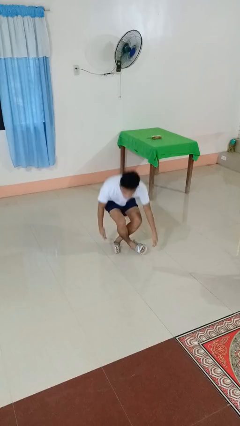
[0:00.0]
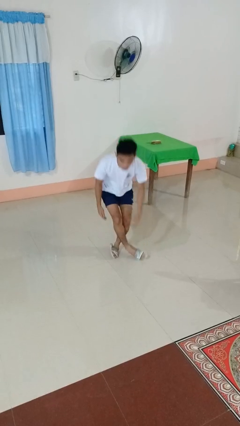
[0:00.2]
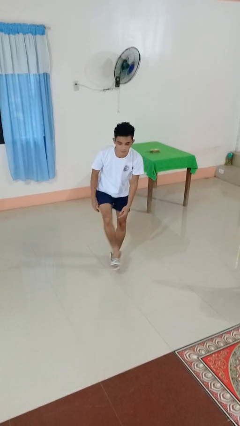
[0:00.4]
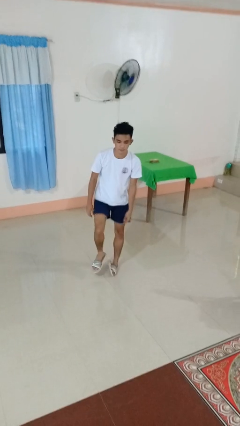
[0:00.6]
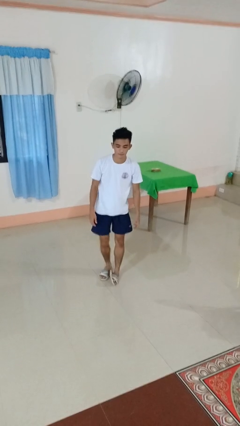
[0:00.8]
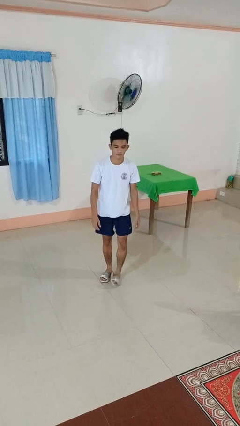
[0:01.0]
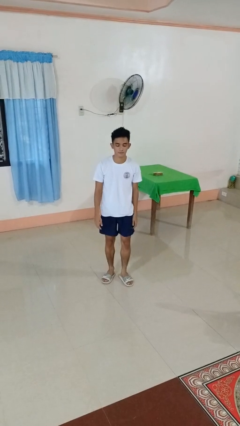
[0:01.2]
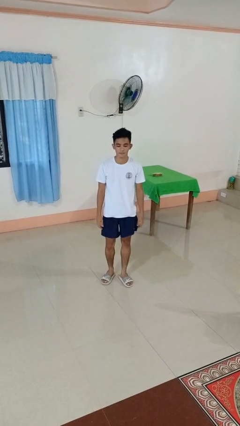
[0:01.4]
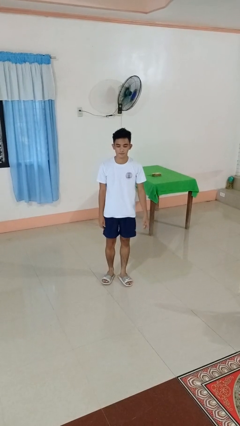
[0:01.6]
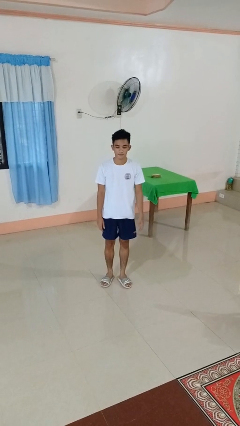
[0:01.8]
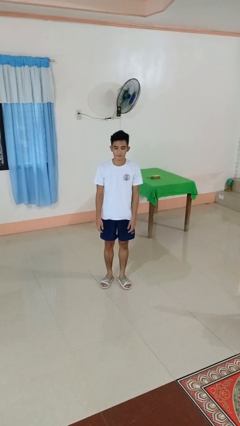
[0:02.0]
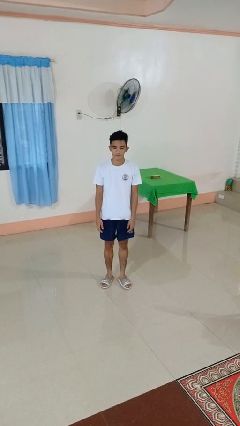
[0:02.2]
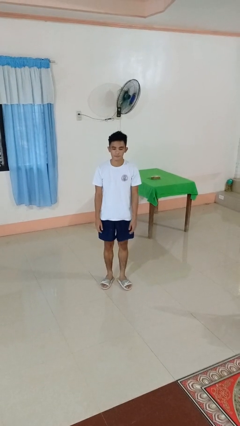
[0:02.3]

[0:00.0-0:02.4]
person stands up from floor

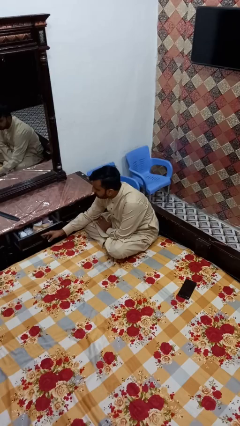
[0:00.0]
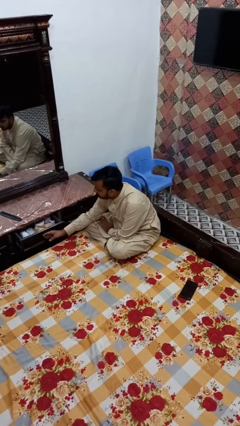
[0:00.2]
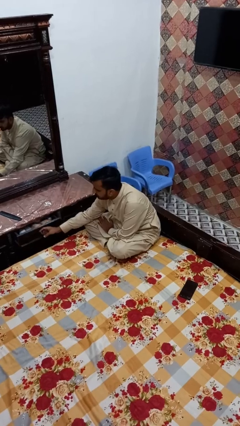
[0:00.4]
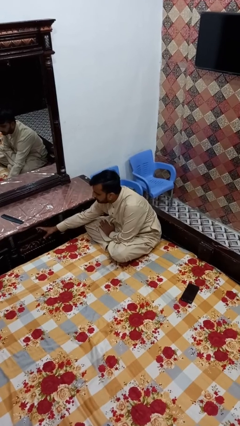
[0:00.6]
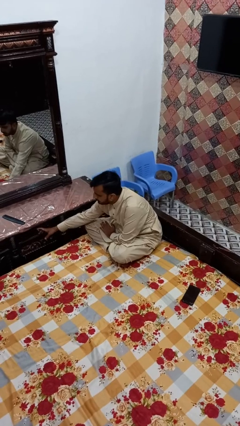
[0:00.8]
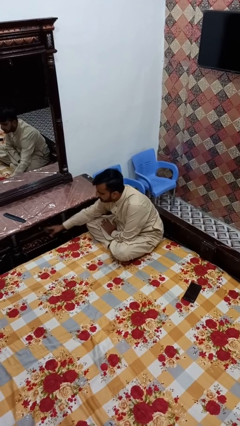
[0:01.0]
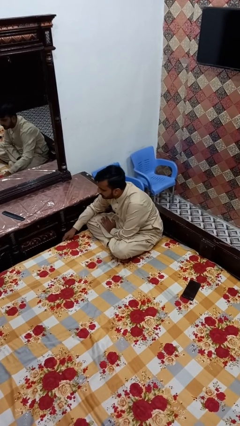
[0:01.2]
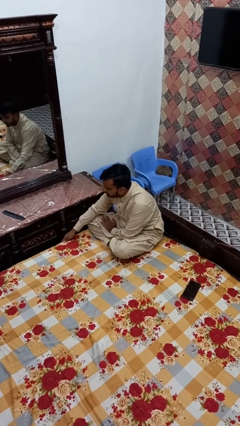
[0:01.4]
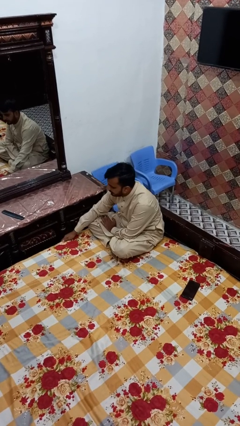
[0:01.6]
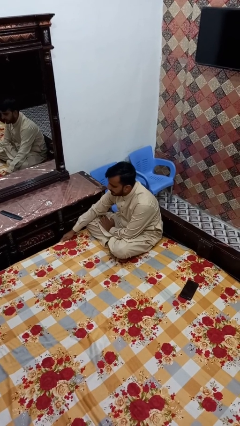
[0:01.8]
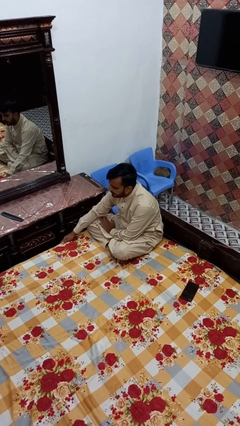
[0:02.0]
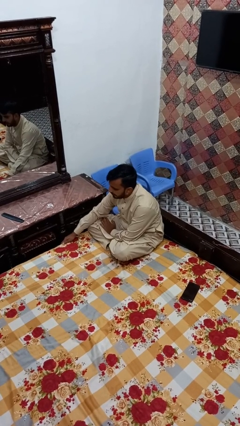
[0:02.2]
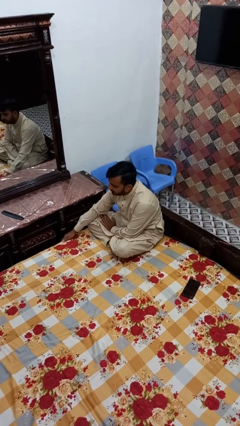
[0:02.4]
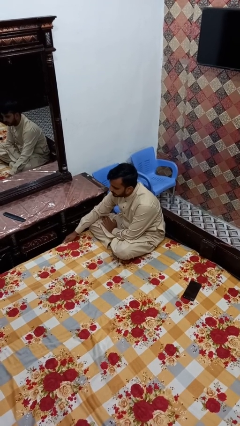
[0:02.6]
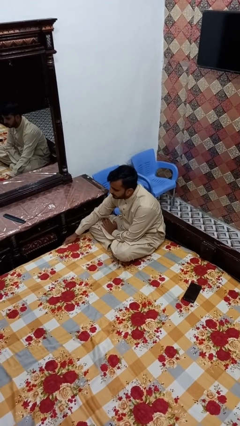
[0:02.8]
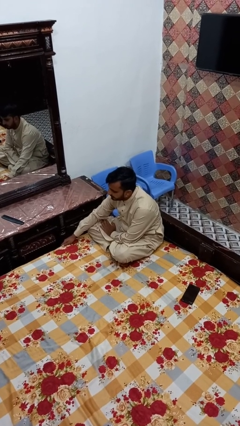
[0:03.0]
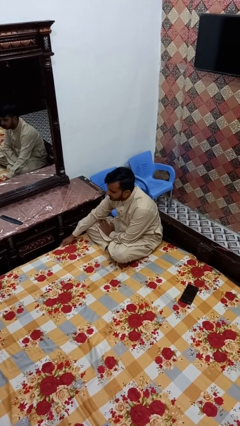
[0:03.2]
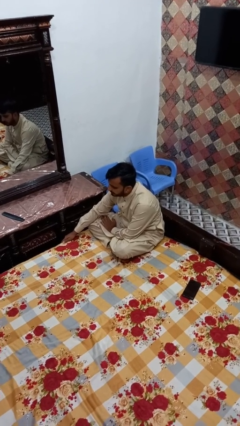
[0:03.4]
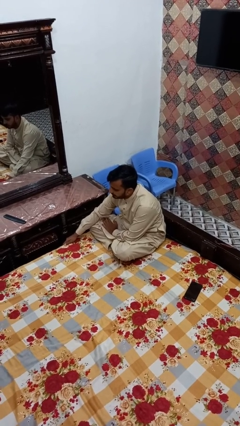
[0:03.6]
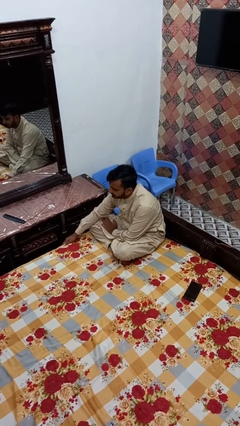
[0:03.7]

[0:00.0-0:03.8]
person closes dresser drawer

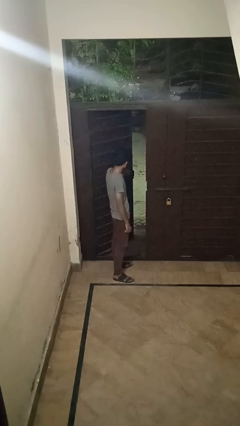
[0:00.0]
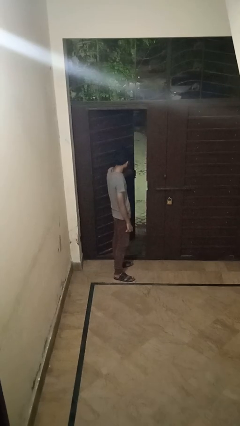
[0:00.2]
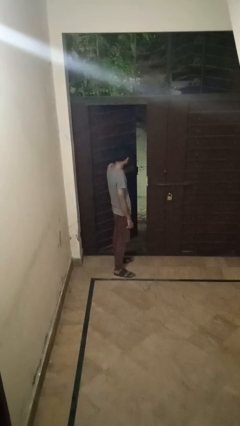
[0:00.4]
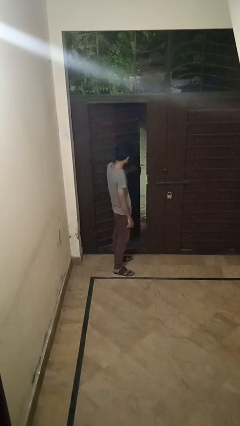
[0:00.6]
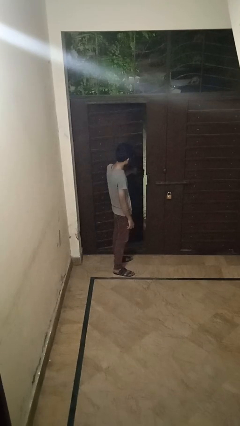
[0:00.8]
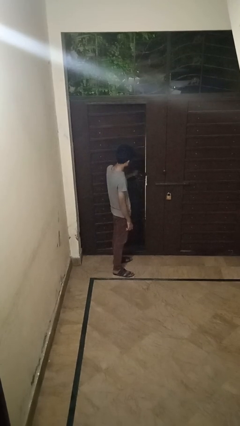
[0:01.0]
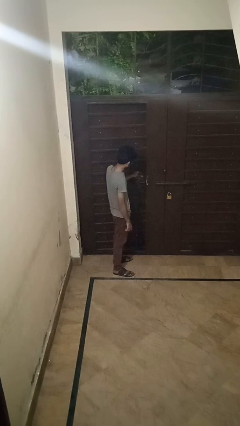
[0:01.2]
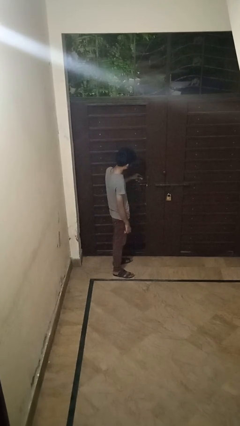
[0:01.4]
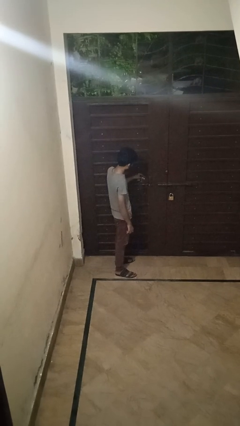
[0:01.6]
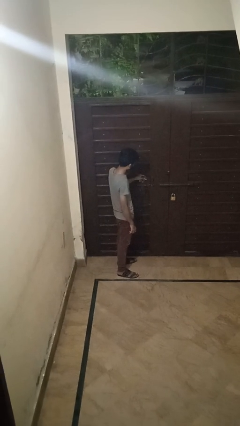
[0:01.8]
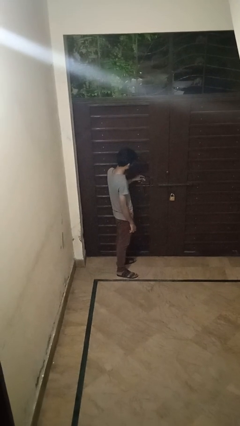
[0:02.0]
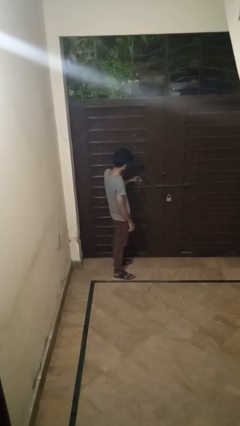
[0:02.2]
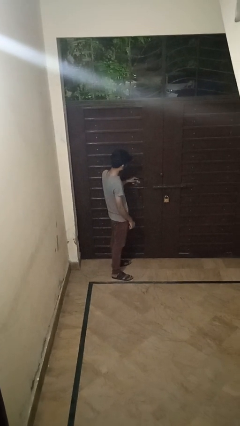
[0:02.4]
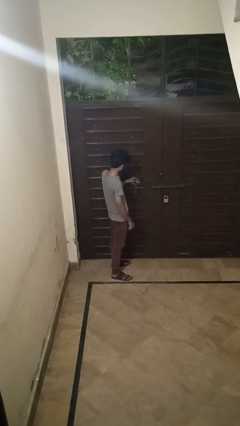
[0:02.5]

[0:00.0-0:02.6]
person closes facility door

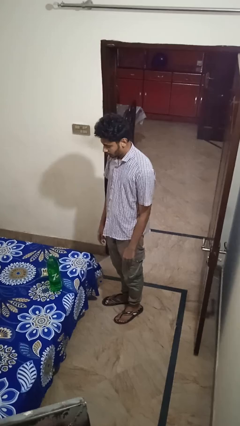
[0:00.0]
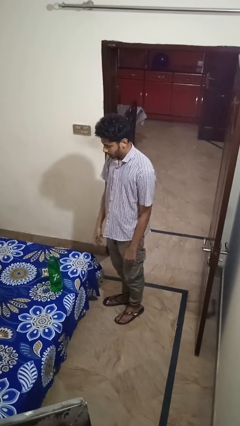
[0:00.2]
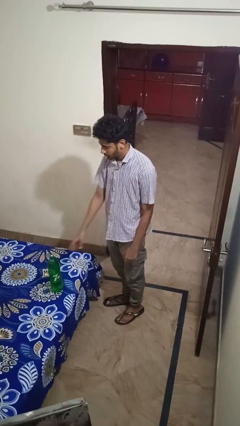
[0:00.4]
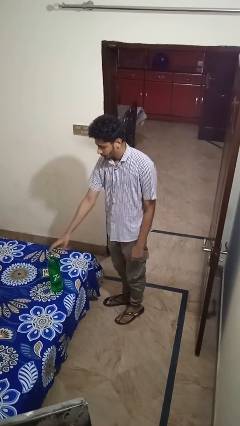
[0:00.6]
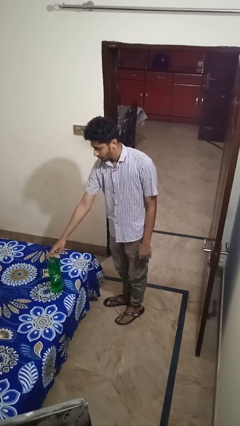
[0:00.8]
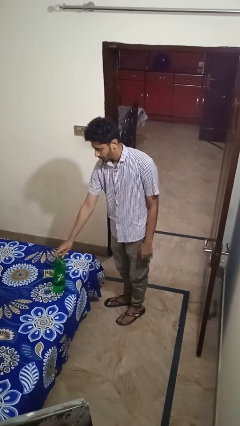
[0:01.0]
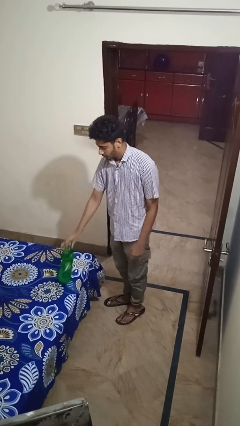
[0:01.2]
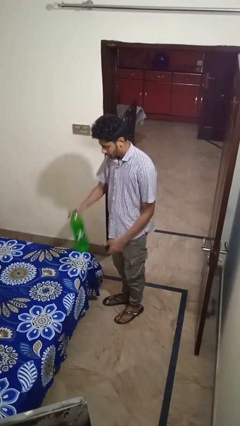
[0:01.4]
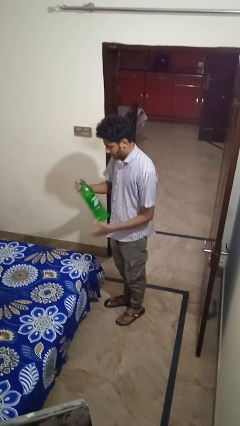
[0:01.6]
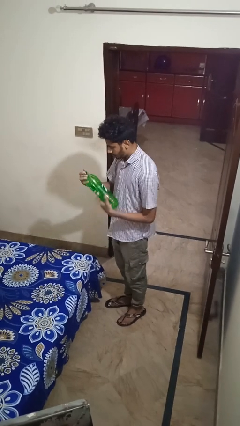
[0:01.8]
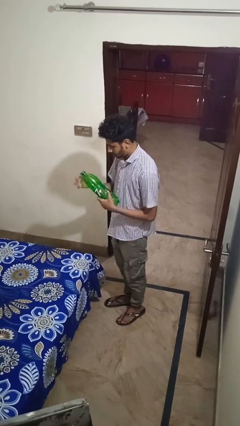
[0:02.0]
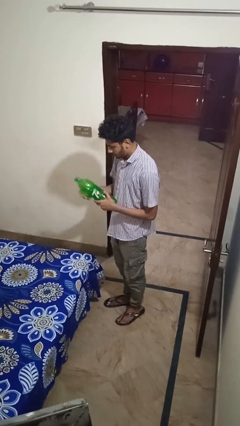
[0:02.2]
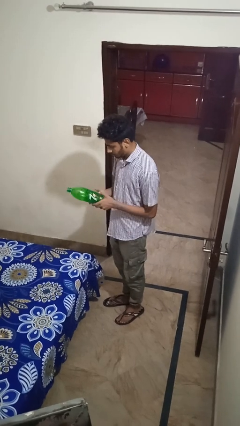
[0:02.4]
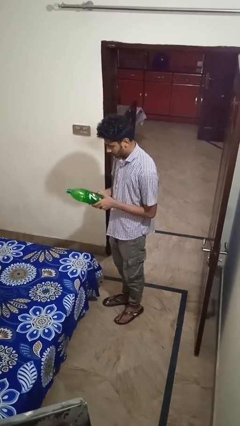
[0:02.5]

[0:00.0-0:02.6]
person picks up object from bed

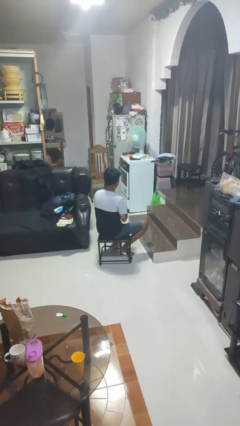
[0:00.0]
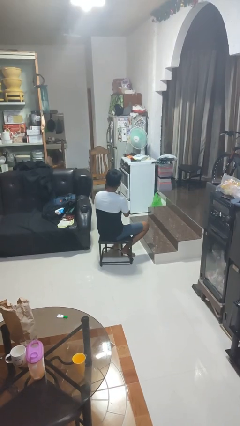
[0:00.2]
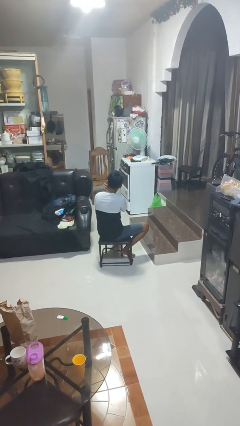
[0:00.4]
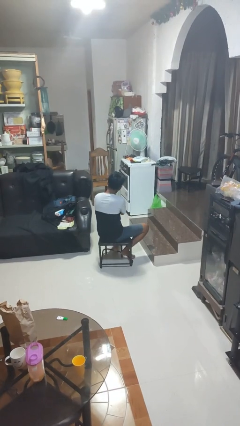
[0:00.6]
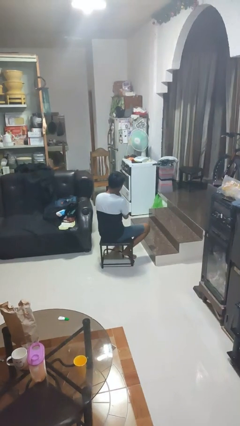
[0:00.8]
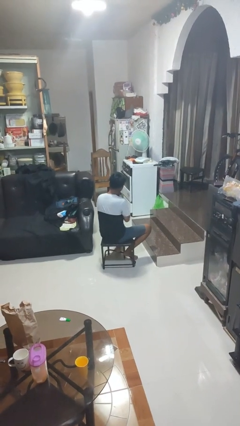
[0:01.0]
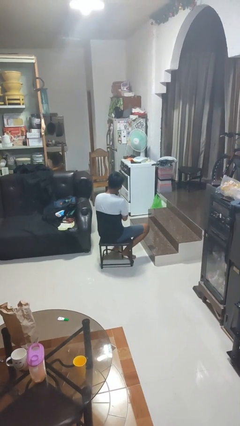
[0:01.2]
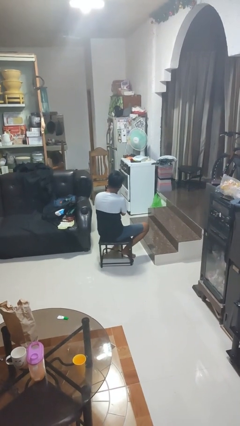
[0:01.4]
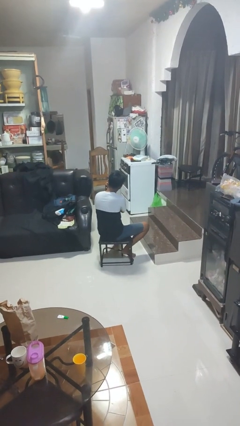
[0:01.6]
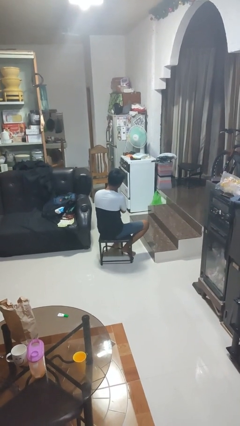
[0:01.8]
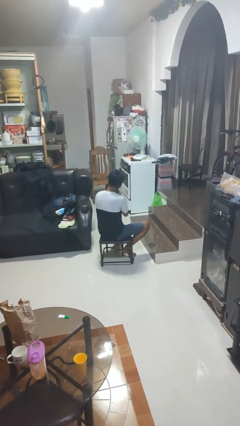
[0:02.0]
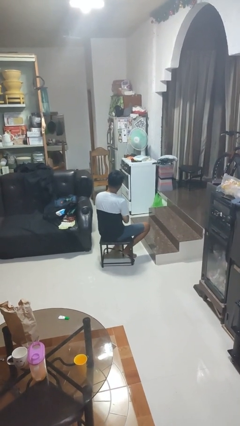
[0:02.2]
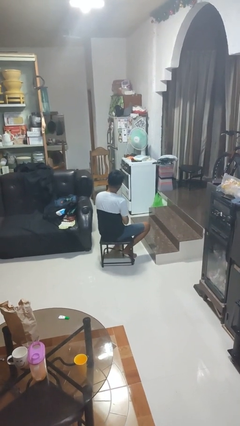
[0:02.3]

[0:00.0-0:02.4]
person strokes chin

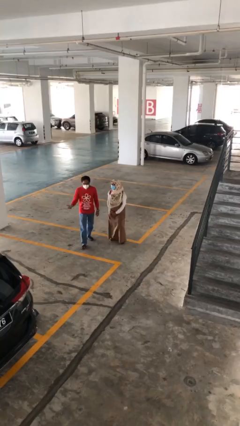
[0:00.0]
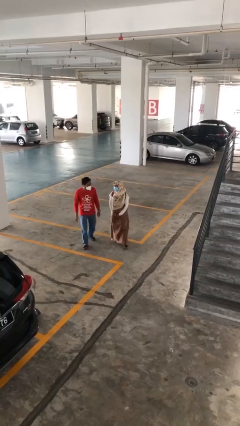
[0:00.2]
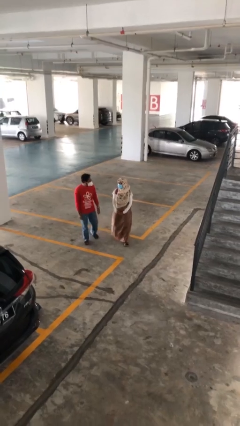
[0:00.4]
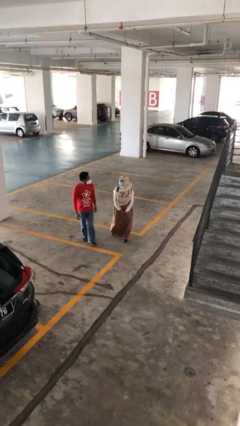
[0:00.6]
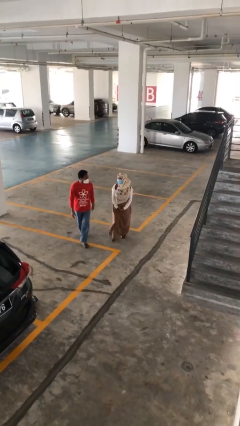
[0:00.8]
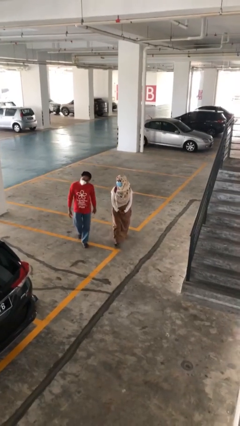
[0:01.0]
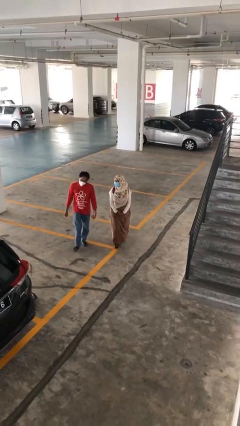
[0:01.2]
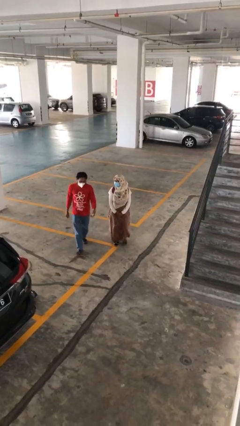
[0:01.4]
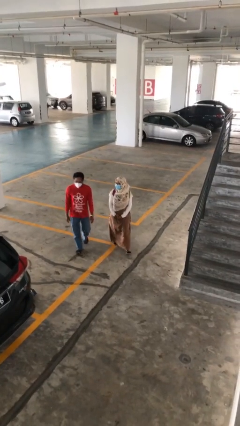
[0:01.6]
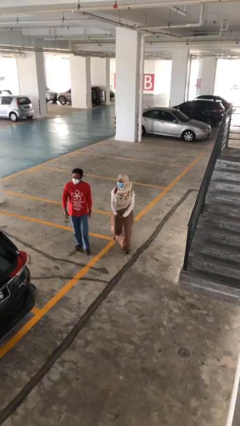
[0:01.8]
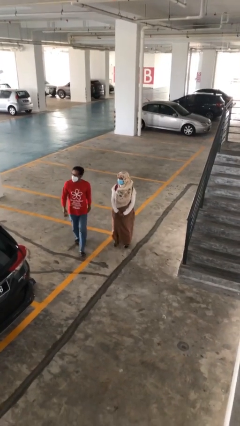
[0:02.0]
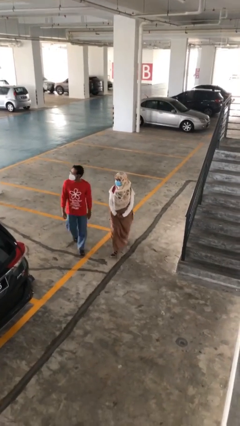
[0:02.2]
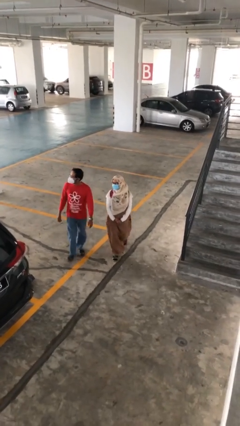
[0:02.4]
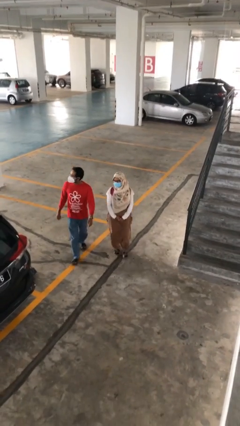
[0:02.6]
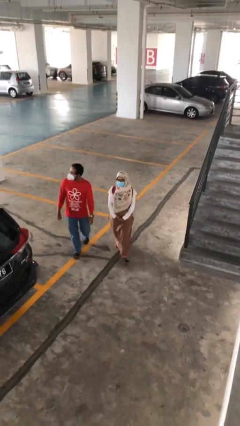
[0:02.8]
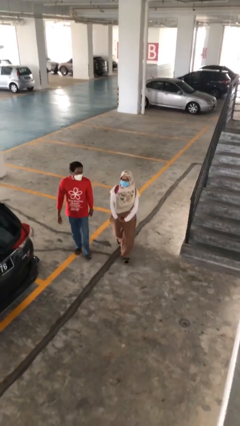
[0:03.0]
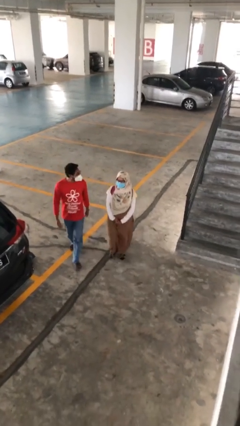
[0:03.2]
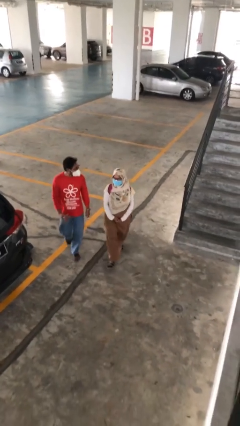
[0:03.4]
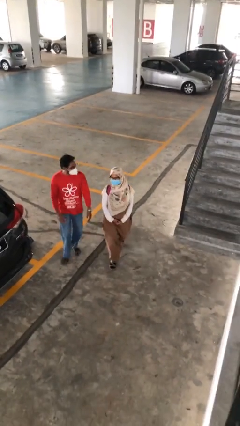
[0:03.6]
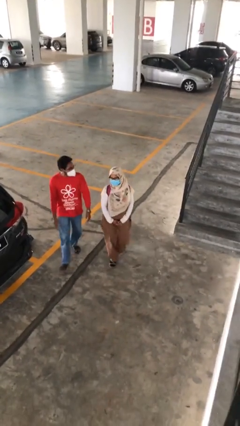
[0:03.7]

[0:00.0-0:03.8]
person talks to person
